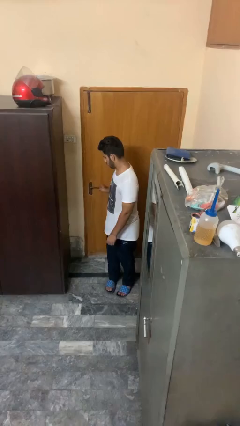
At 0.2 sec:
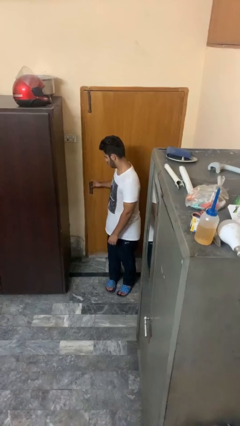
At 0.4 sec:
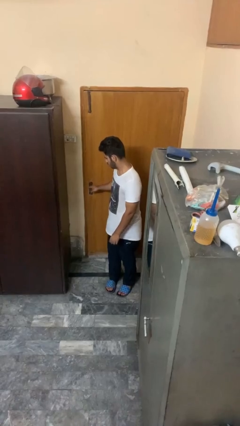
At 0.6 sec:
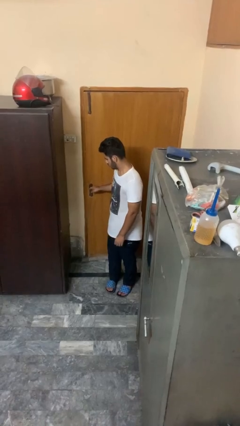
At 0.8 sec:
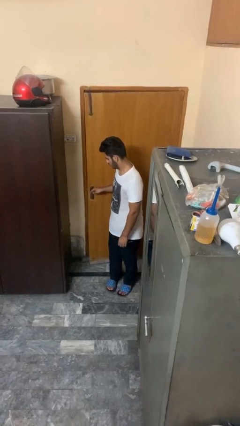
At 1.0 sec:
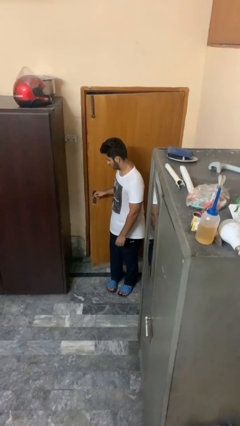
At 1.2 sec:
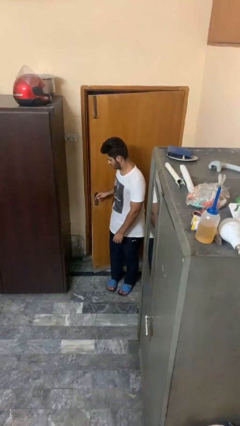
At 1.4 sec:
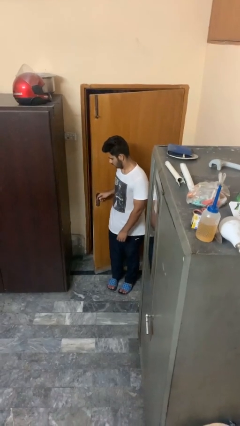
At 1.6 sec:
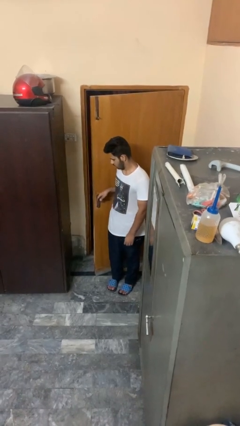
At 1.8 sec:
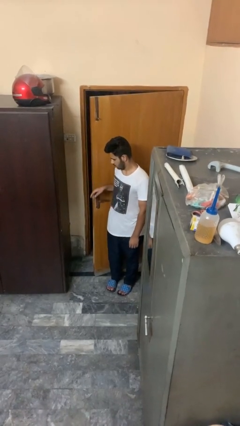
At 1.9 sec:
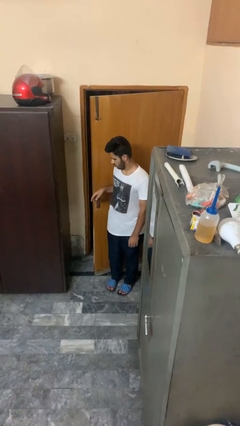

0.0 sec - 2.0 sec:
person opens facility door

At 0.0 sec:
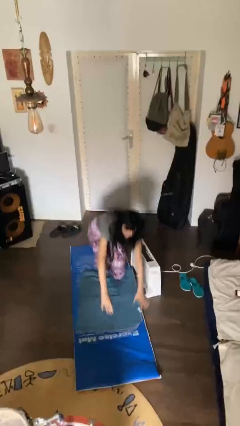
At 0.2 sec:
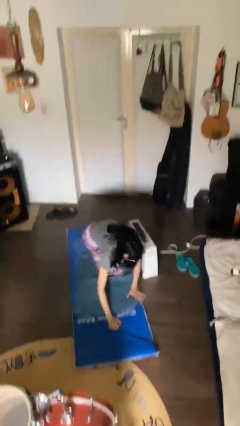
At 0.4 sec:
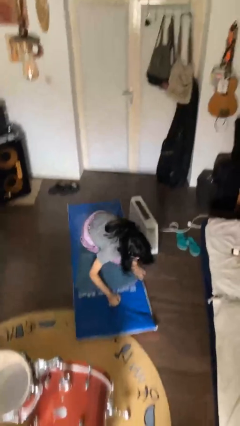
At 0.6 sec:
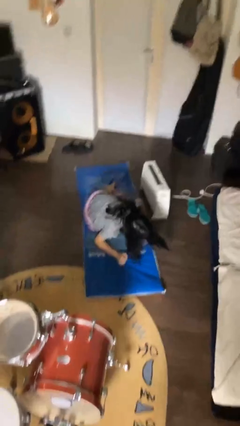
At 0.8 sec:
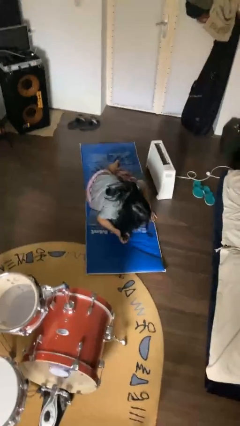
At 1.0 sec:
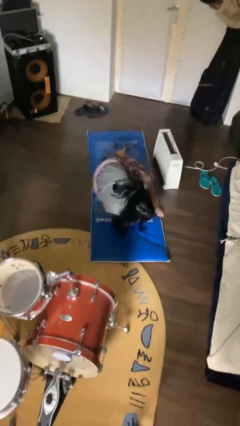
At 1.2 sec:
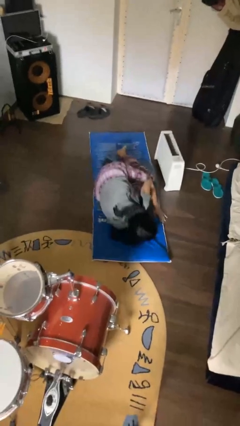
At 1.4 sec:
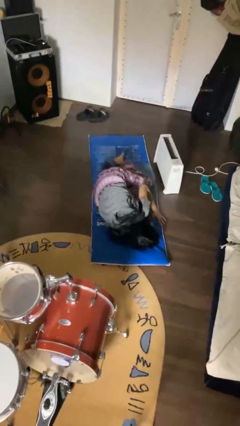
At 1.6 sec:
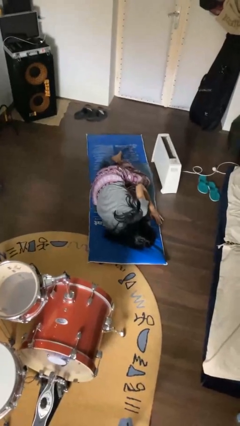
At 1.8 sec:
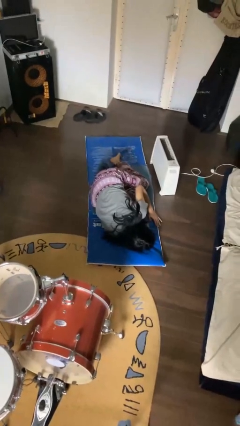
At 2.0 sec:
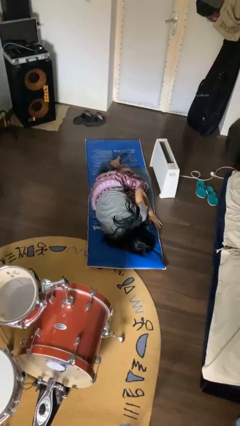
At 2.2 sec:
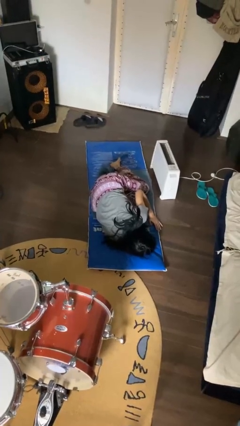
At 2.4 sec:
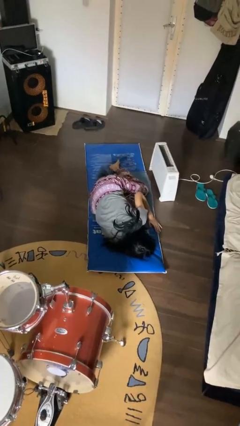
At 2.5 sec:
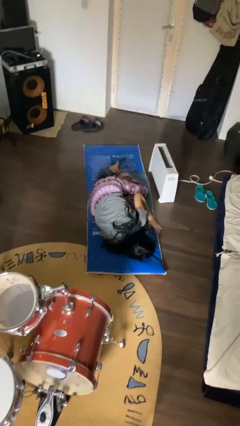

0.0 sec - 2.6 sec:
person lies down on floor

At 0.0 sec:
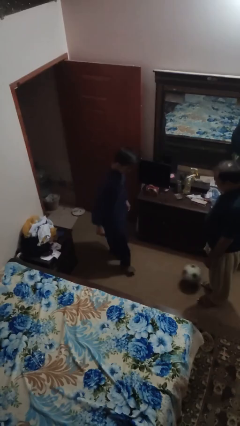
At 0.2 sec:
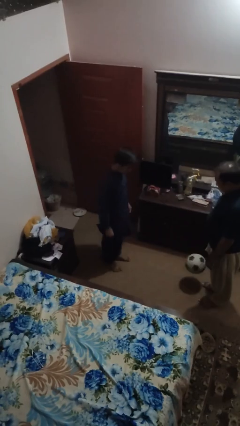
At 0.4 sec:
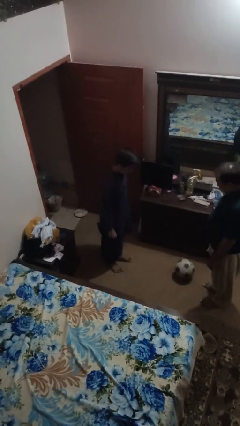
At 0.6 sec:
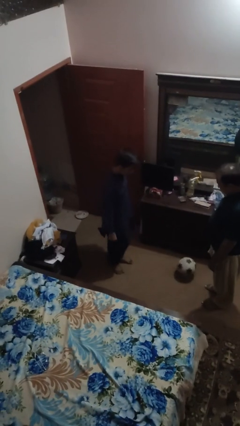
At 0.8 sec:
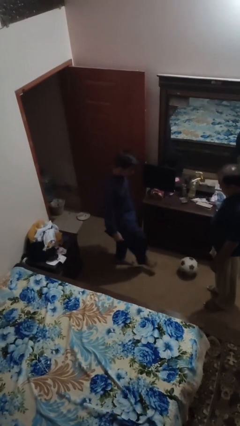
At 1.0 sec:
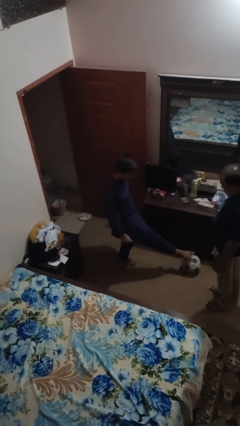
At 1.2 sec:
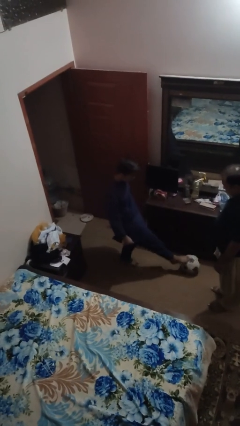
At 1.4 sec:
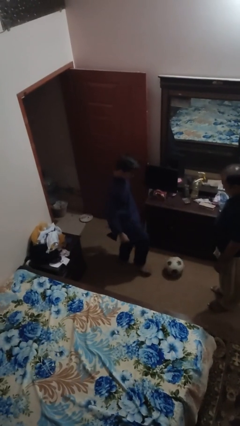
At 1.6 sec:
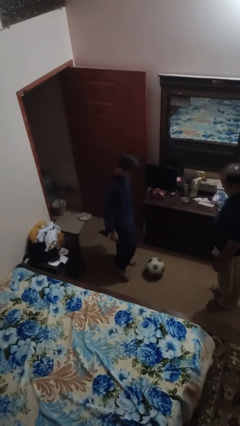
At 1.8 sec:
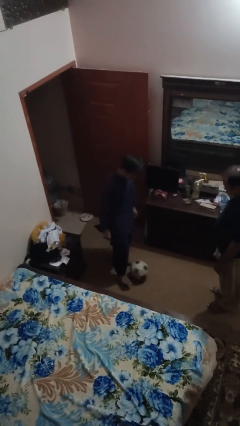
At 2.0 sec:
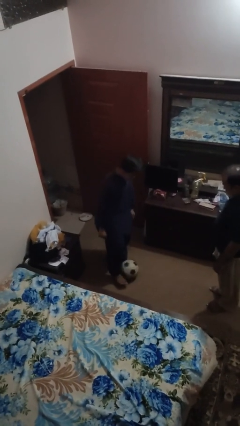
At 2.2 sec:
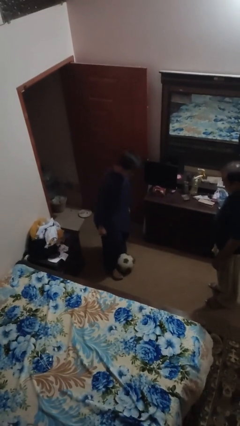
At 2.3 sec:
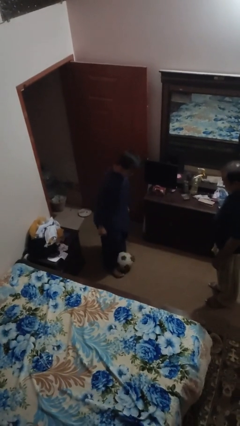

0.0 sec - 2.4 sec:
person kicks object to person

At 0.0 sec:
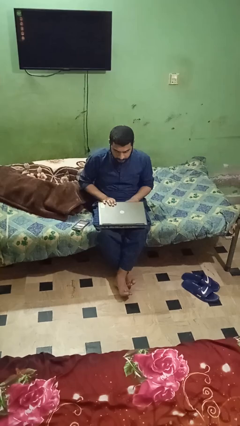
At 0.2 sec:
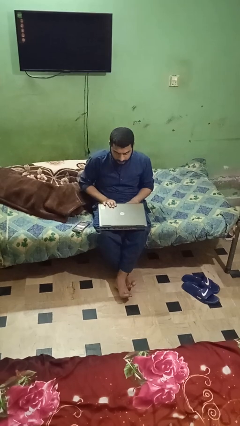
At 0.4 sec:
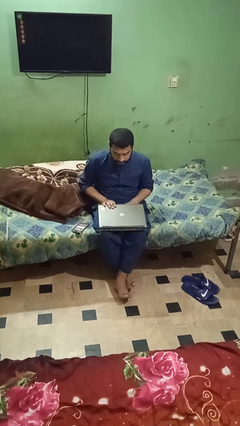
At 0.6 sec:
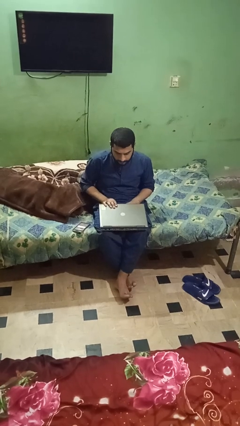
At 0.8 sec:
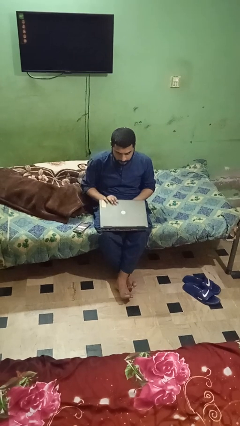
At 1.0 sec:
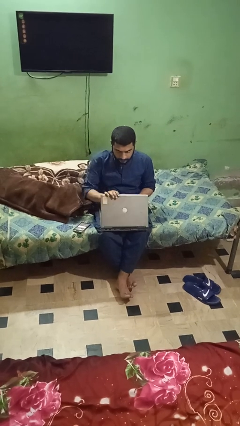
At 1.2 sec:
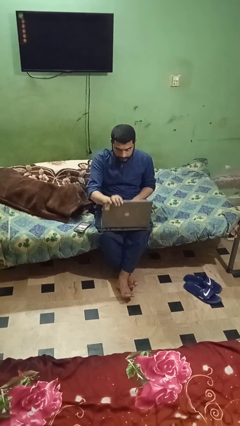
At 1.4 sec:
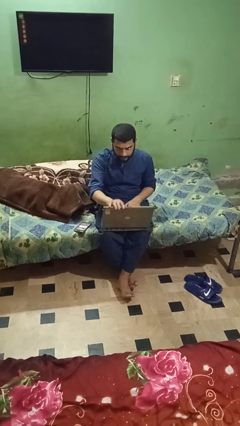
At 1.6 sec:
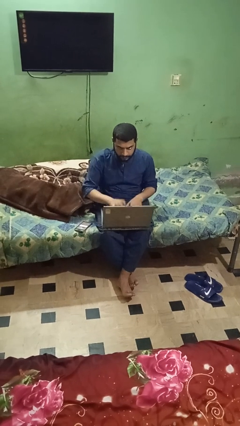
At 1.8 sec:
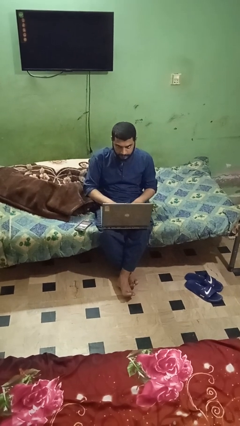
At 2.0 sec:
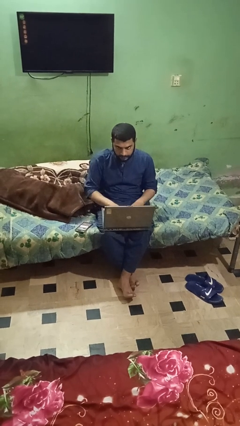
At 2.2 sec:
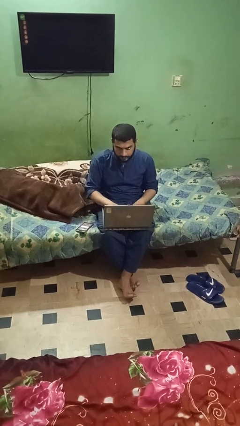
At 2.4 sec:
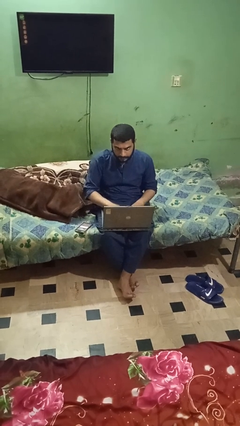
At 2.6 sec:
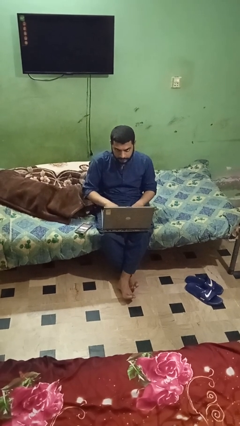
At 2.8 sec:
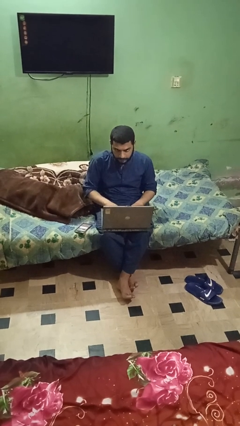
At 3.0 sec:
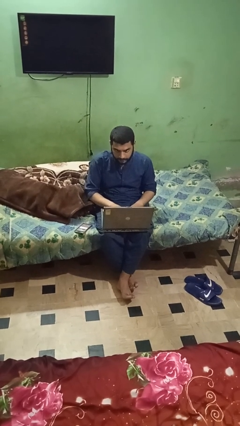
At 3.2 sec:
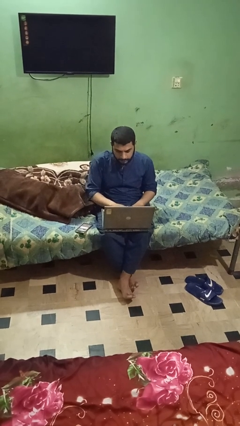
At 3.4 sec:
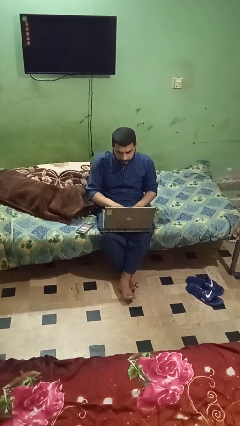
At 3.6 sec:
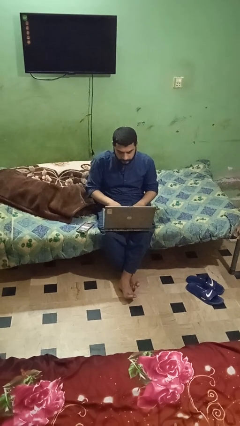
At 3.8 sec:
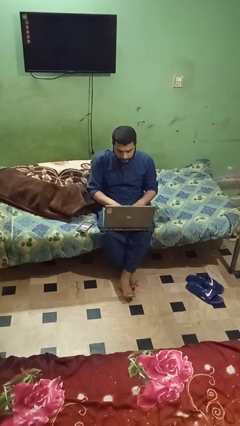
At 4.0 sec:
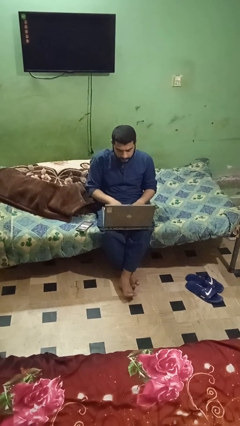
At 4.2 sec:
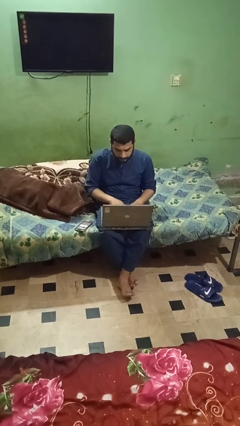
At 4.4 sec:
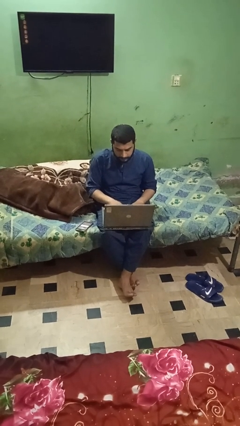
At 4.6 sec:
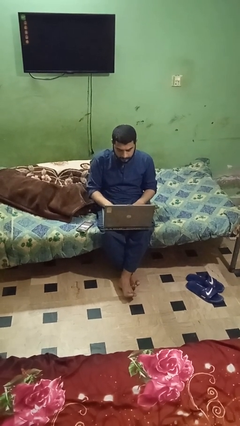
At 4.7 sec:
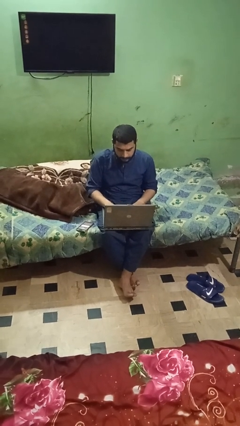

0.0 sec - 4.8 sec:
person opens laptop

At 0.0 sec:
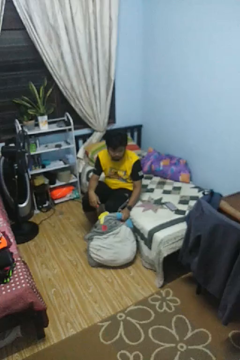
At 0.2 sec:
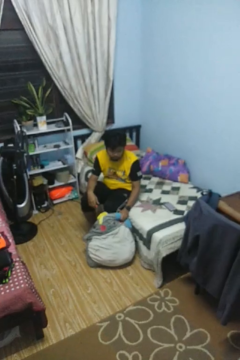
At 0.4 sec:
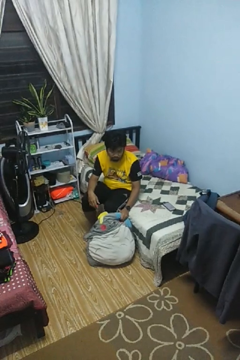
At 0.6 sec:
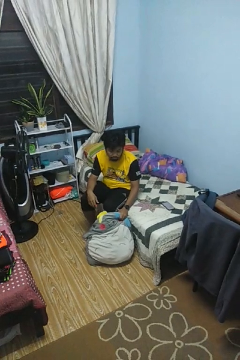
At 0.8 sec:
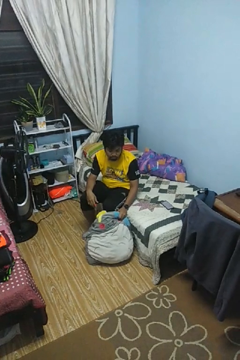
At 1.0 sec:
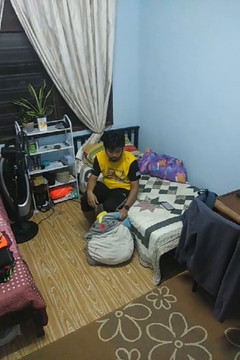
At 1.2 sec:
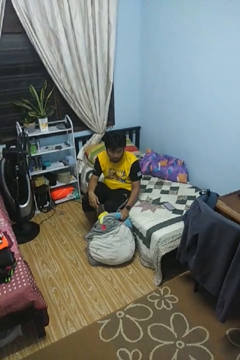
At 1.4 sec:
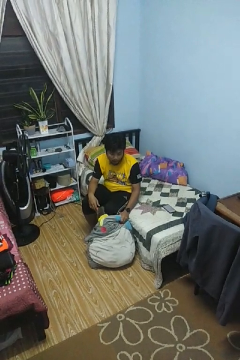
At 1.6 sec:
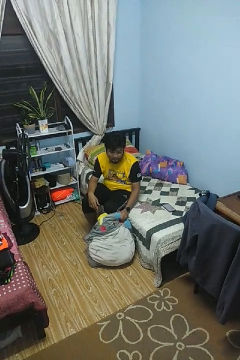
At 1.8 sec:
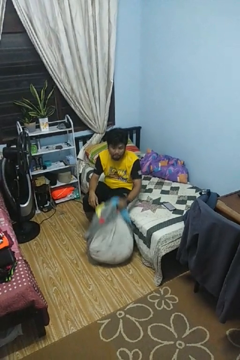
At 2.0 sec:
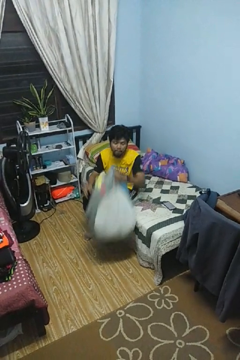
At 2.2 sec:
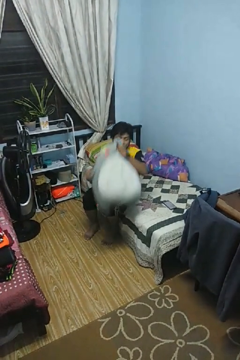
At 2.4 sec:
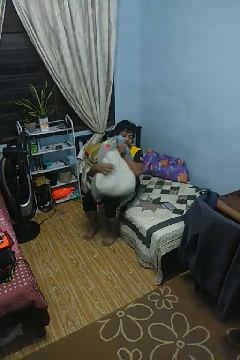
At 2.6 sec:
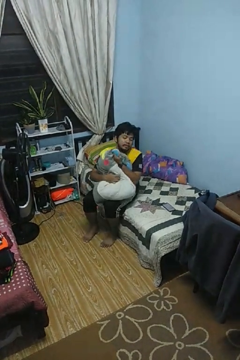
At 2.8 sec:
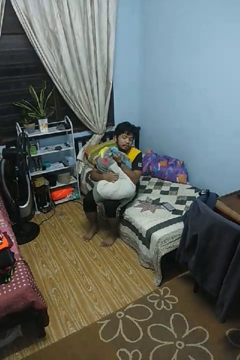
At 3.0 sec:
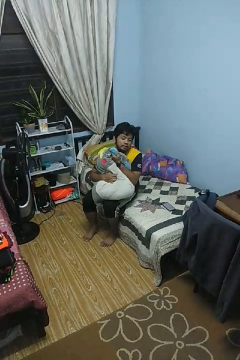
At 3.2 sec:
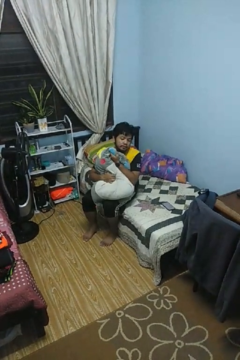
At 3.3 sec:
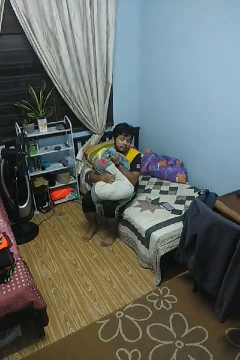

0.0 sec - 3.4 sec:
person hugs stuffed animal

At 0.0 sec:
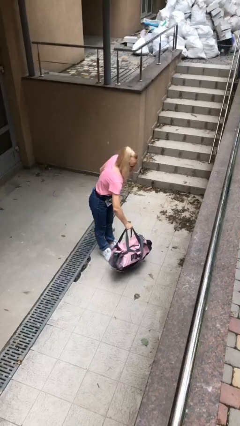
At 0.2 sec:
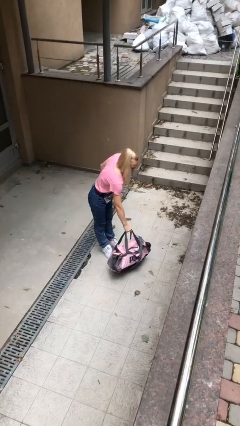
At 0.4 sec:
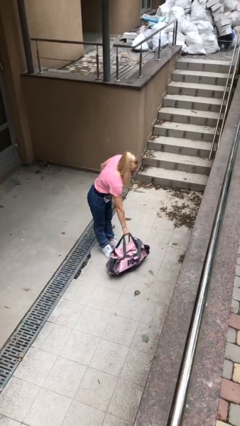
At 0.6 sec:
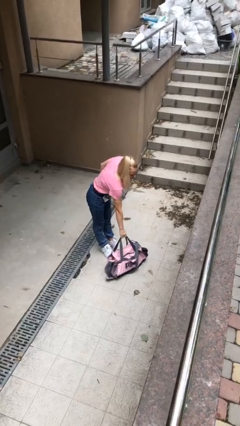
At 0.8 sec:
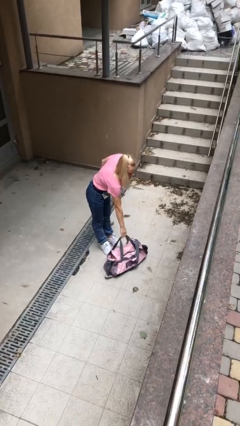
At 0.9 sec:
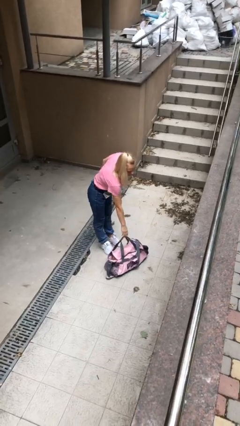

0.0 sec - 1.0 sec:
person puts down object on floor

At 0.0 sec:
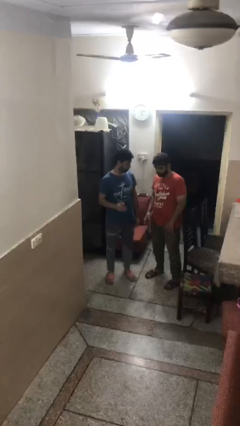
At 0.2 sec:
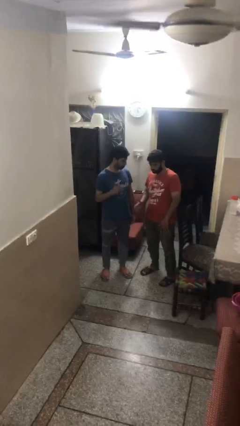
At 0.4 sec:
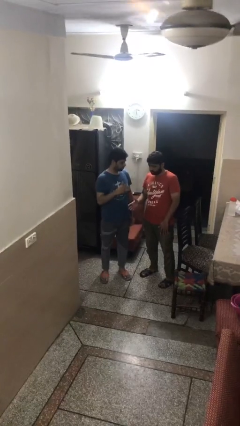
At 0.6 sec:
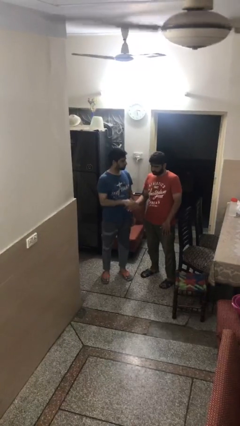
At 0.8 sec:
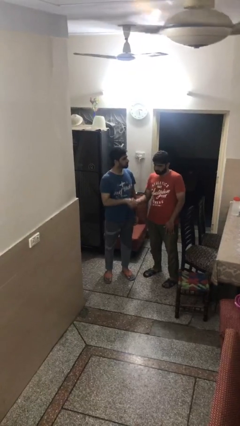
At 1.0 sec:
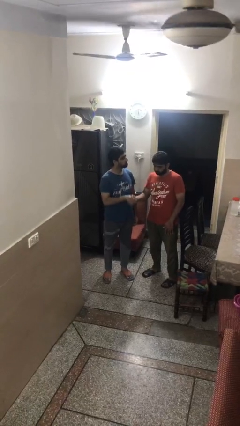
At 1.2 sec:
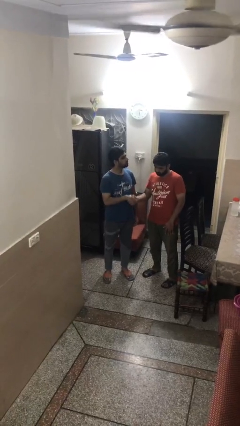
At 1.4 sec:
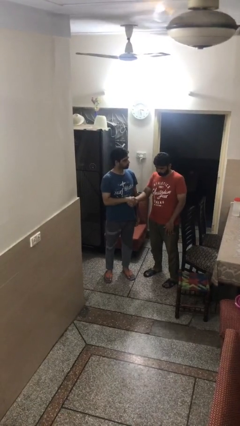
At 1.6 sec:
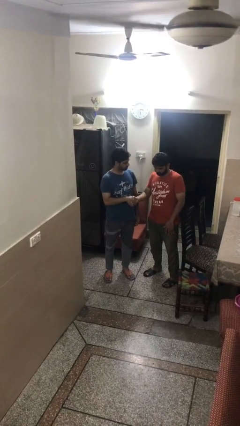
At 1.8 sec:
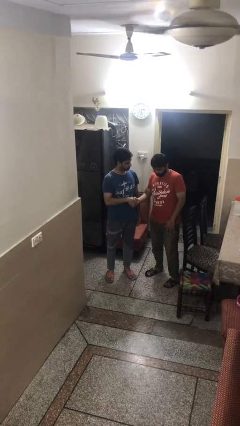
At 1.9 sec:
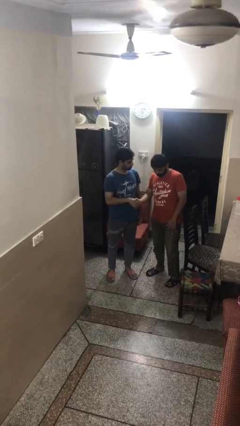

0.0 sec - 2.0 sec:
person shakes hand
